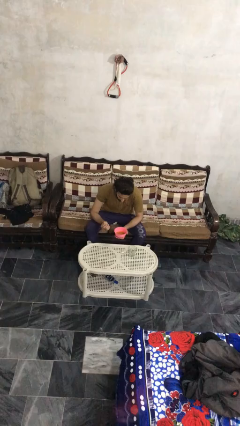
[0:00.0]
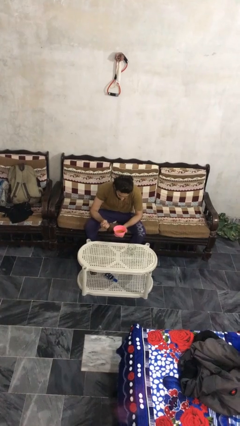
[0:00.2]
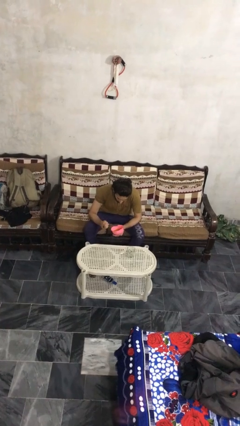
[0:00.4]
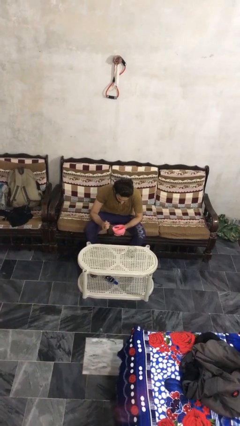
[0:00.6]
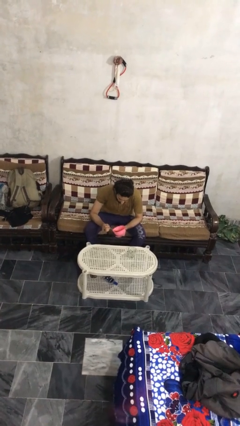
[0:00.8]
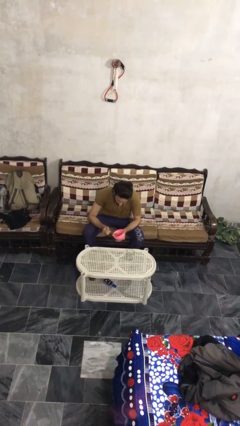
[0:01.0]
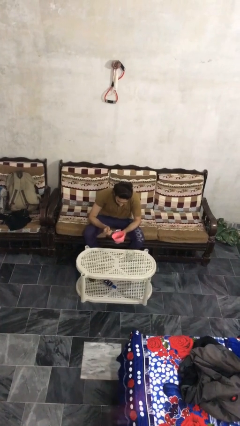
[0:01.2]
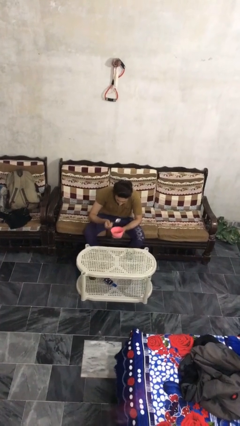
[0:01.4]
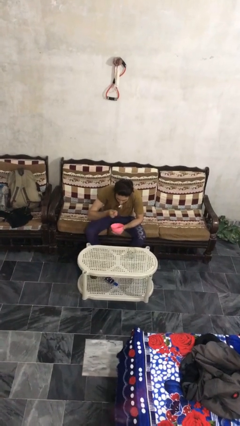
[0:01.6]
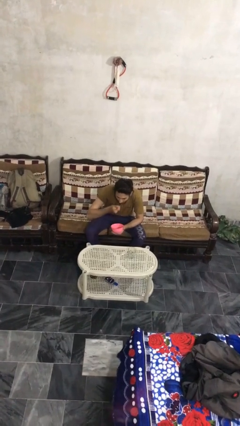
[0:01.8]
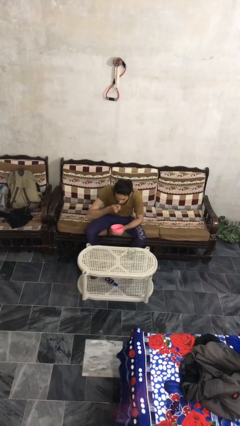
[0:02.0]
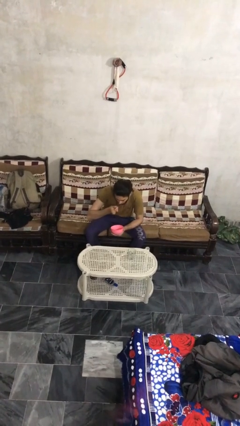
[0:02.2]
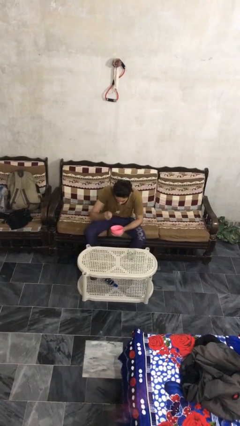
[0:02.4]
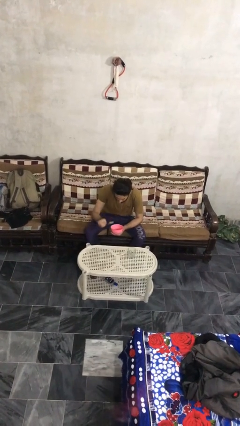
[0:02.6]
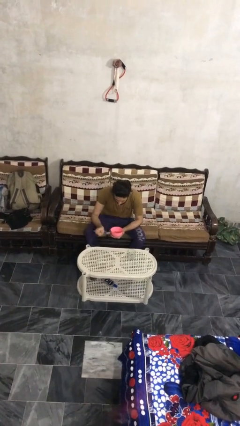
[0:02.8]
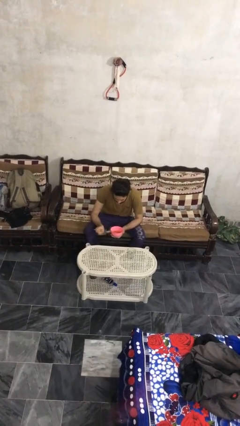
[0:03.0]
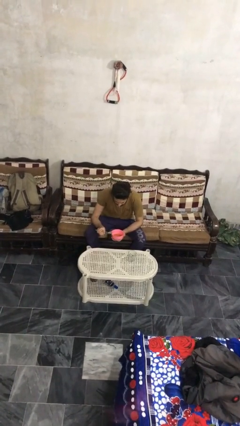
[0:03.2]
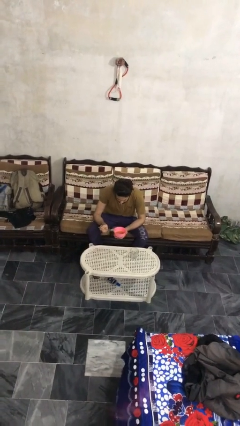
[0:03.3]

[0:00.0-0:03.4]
person eats with utensil

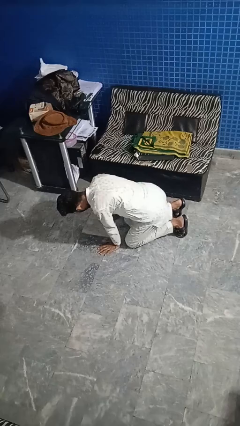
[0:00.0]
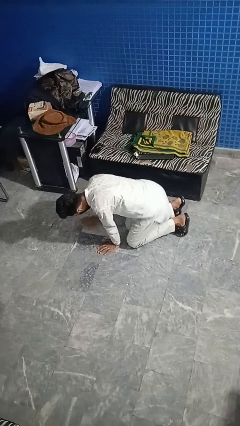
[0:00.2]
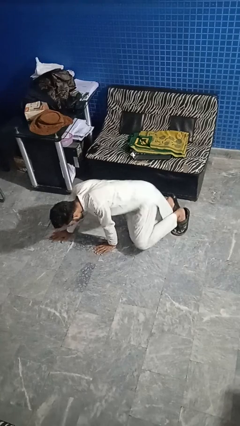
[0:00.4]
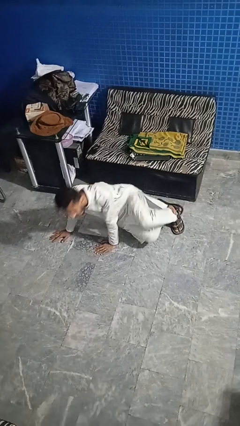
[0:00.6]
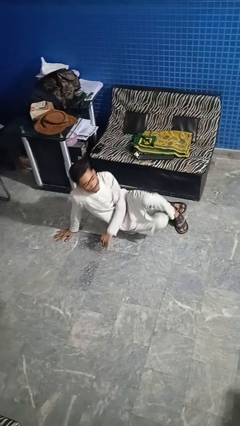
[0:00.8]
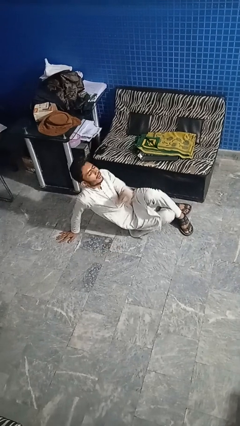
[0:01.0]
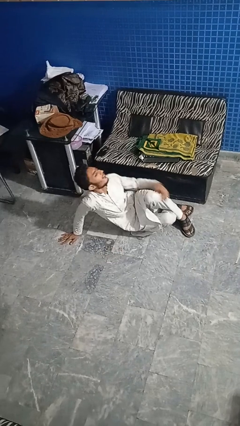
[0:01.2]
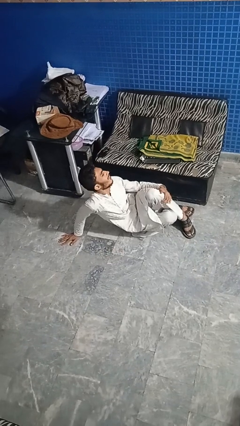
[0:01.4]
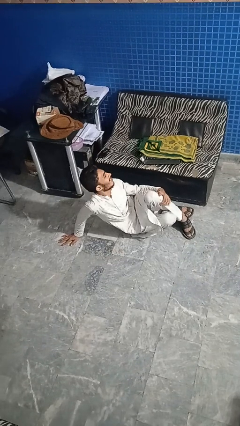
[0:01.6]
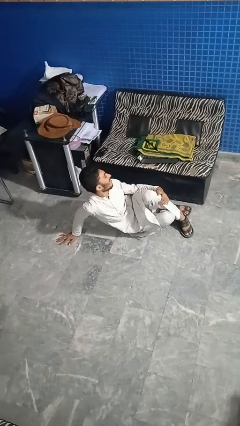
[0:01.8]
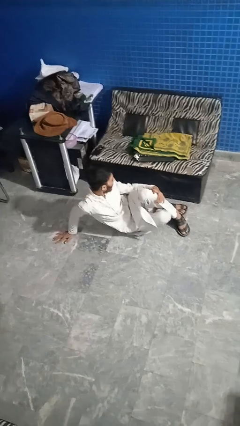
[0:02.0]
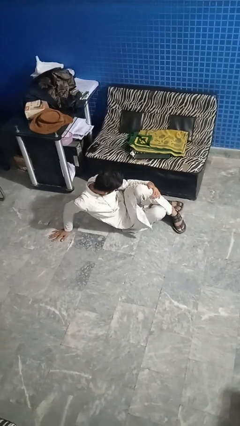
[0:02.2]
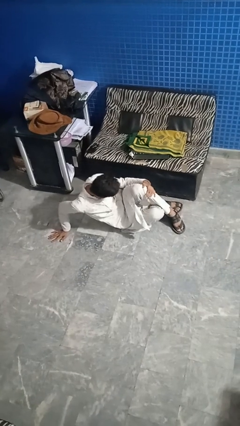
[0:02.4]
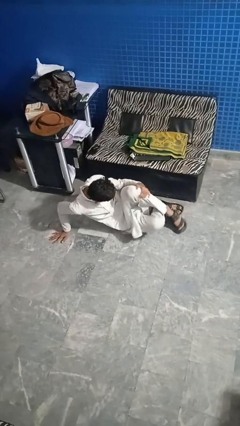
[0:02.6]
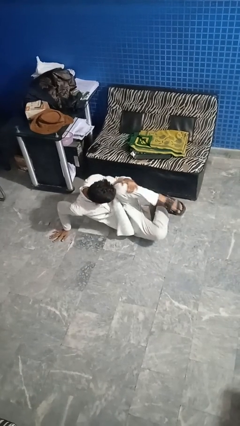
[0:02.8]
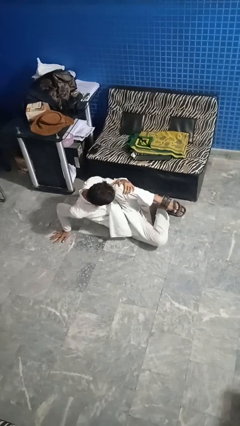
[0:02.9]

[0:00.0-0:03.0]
person lies down on floor

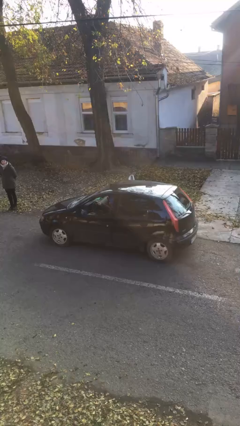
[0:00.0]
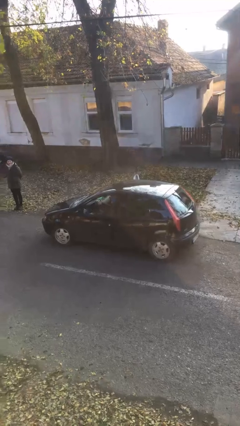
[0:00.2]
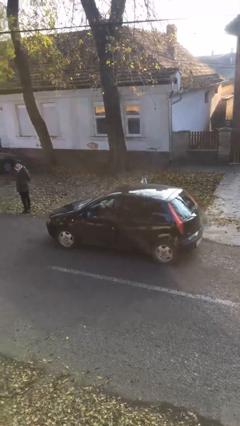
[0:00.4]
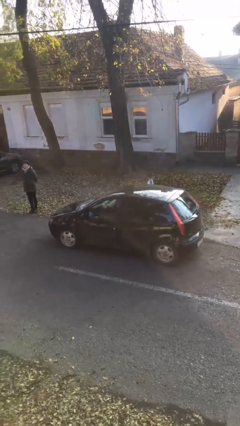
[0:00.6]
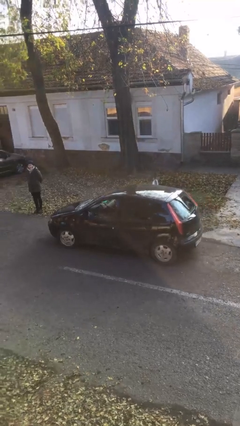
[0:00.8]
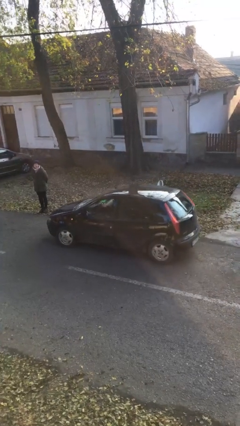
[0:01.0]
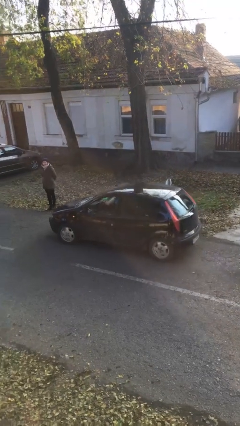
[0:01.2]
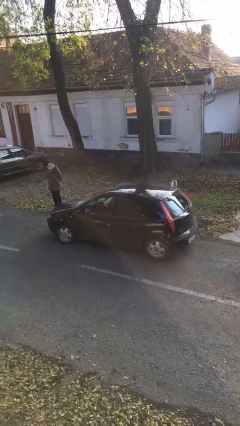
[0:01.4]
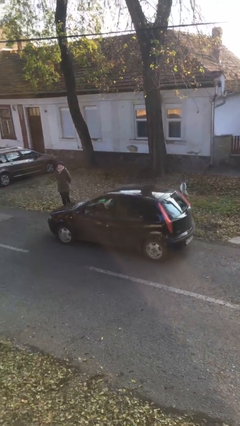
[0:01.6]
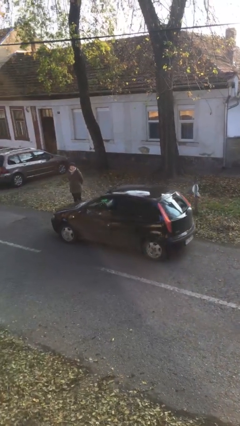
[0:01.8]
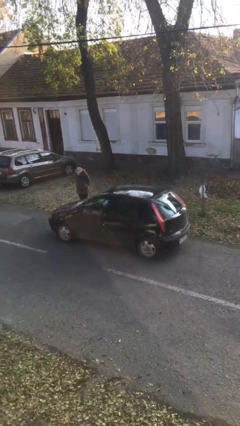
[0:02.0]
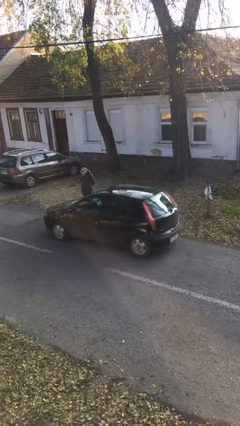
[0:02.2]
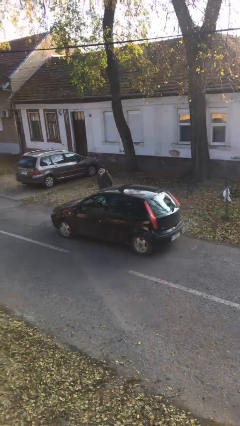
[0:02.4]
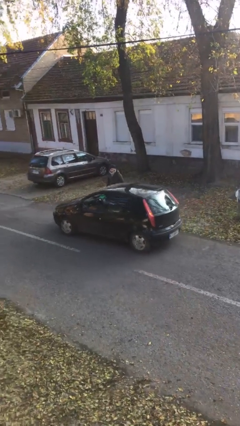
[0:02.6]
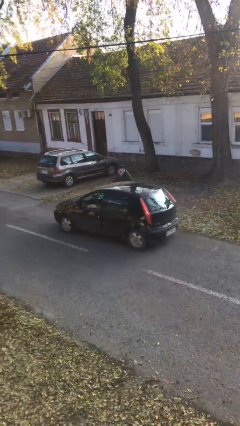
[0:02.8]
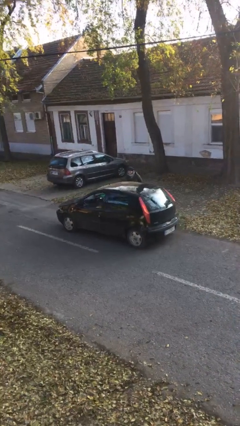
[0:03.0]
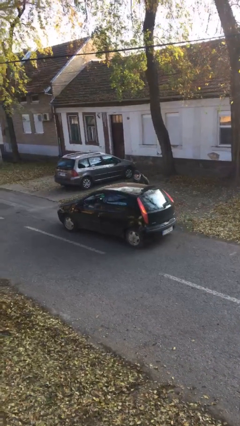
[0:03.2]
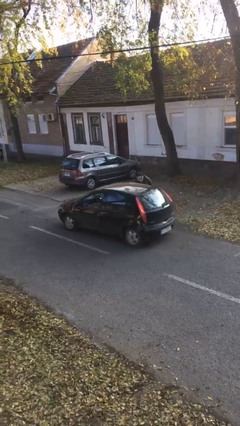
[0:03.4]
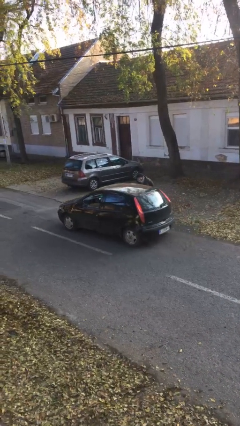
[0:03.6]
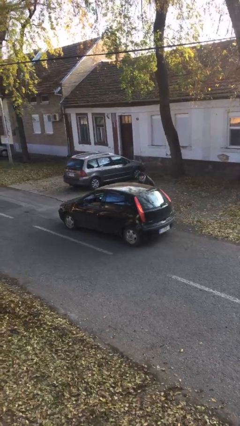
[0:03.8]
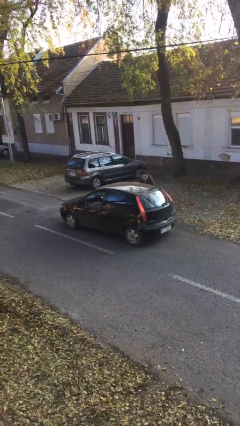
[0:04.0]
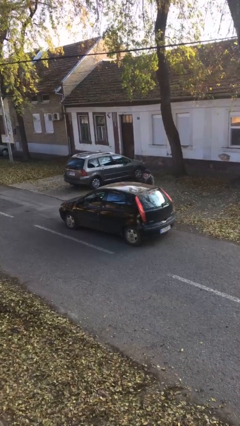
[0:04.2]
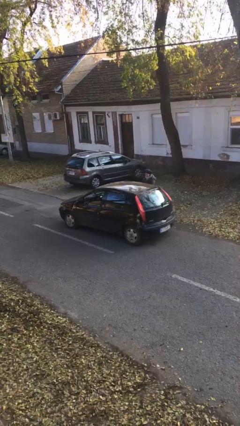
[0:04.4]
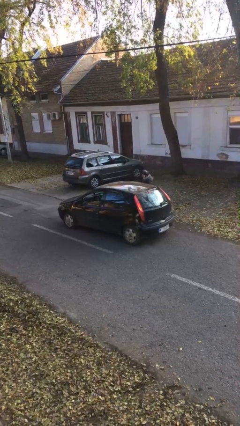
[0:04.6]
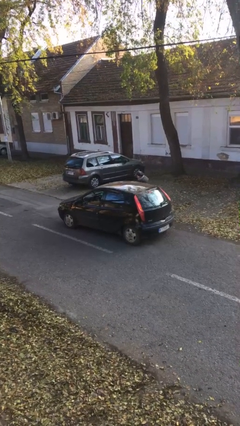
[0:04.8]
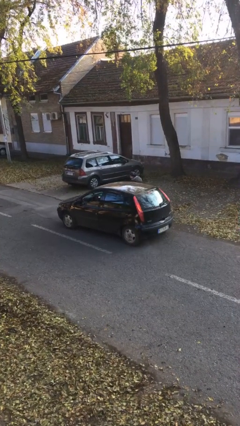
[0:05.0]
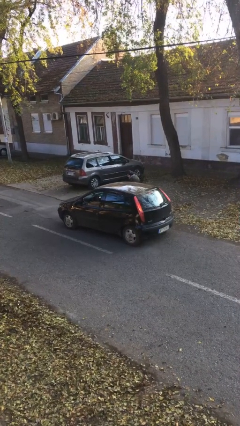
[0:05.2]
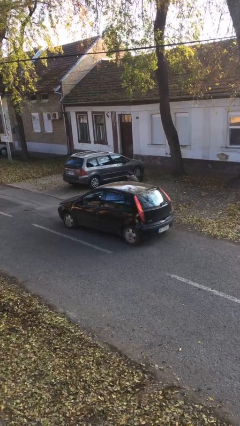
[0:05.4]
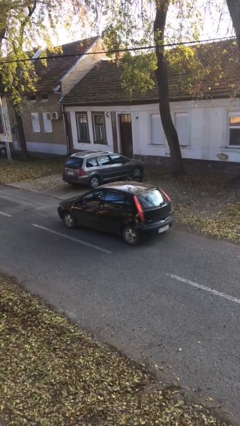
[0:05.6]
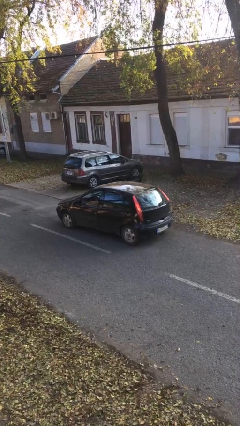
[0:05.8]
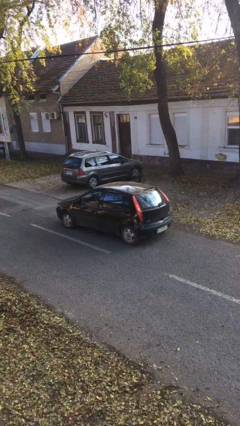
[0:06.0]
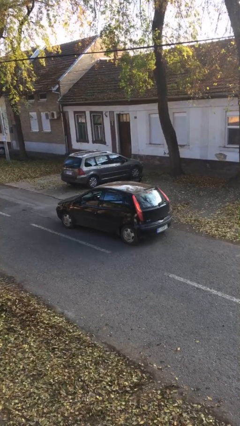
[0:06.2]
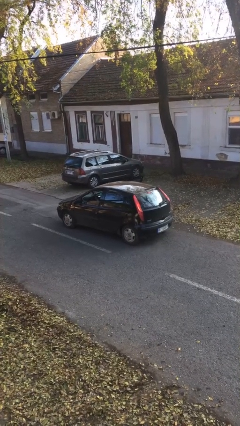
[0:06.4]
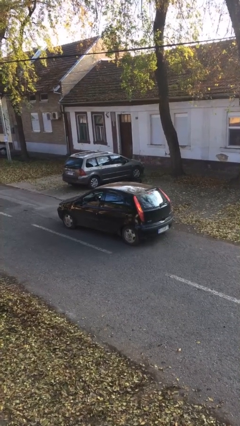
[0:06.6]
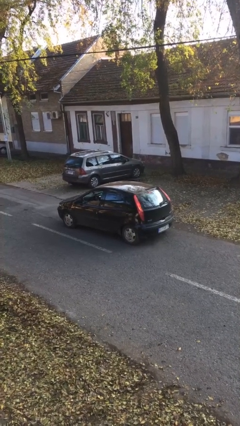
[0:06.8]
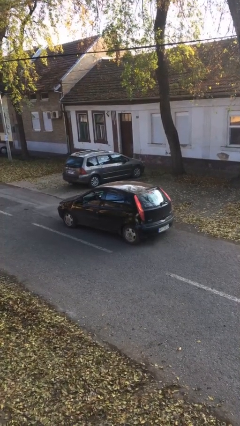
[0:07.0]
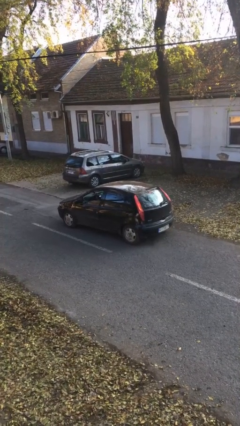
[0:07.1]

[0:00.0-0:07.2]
car picks up person

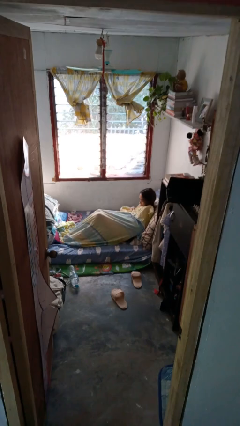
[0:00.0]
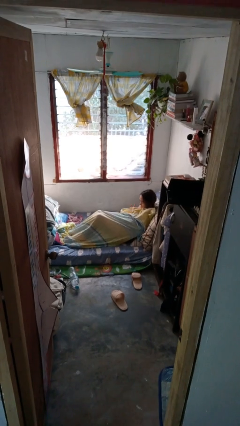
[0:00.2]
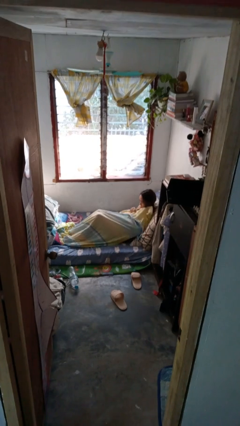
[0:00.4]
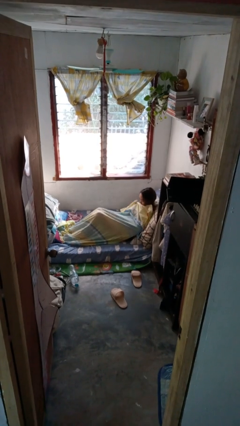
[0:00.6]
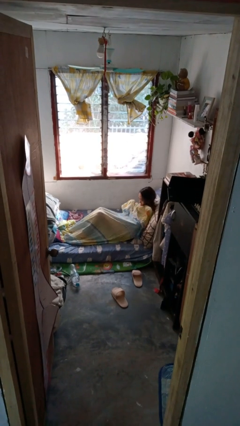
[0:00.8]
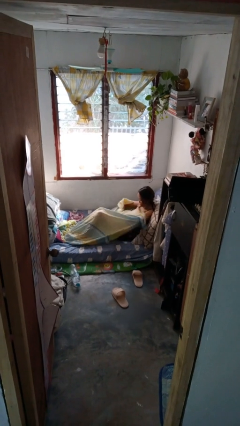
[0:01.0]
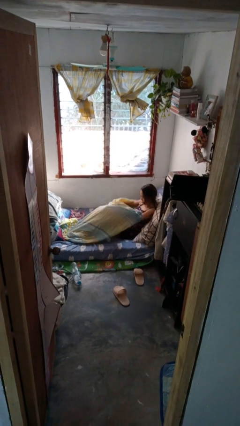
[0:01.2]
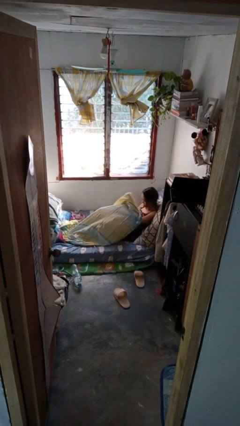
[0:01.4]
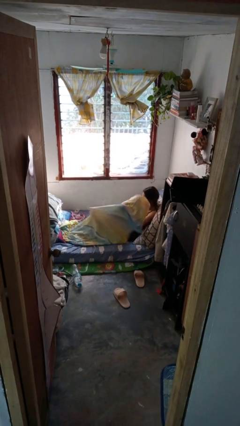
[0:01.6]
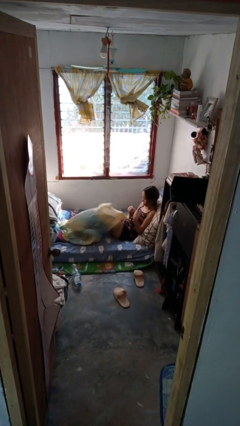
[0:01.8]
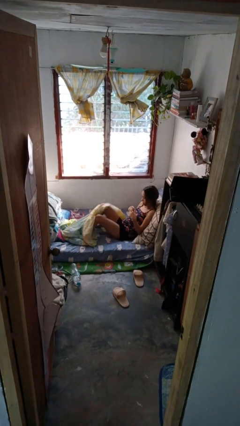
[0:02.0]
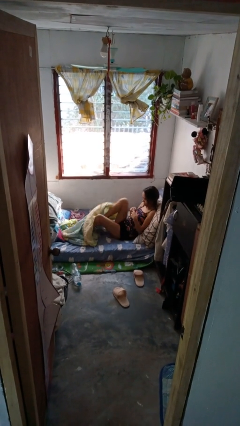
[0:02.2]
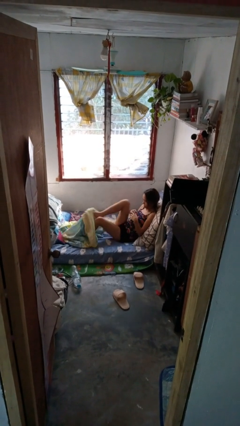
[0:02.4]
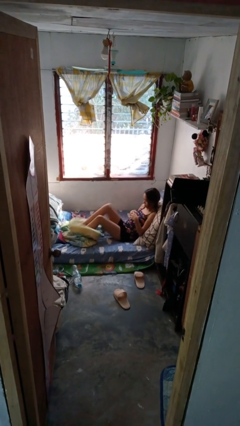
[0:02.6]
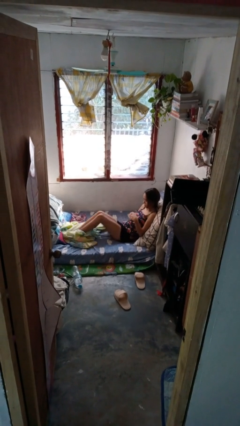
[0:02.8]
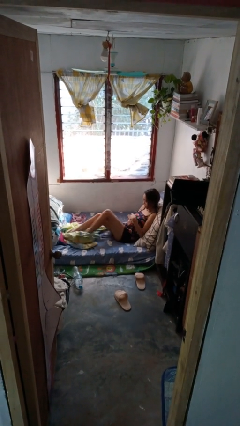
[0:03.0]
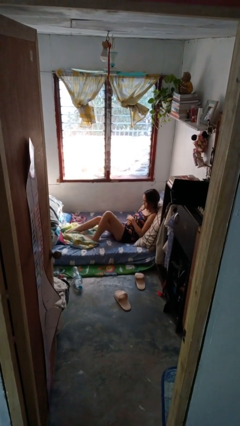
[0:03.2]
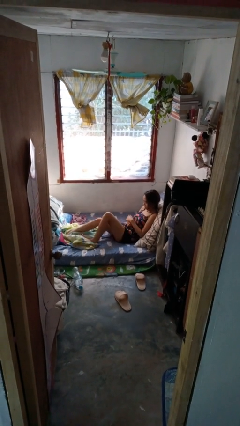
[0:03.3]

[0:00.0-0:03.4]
person uncovers with bedsheets

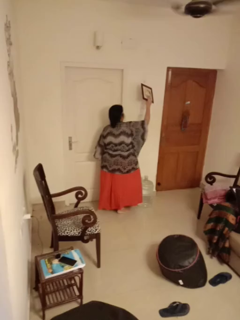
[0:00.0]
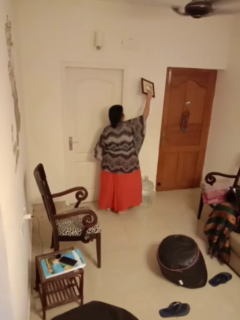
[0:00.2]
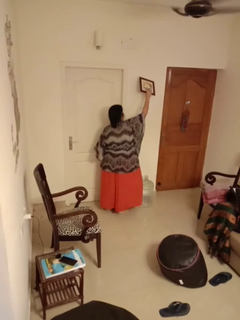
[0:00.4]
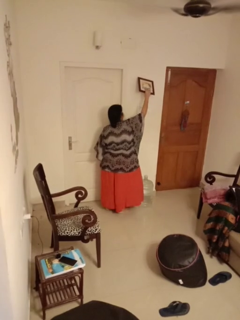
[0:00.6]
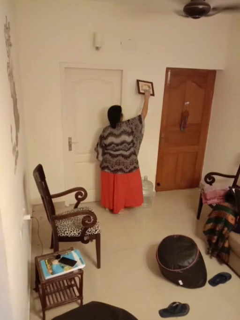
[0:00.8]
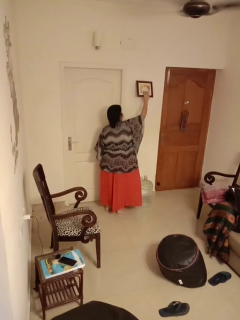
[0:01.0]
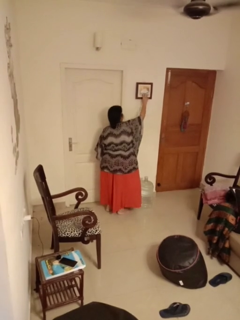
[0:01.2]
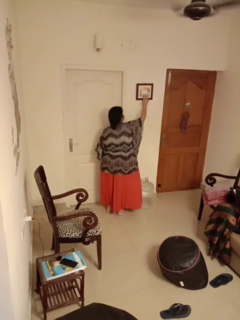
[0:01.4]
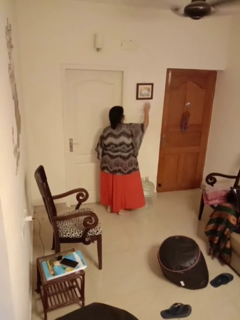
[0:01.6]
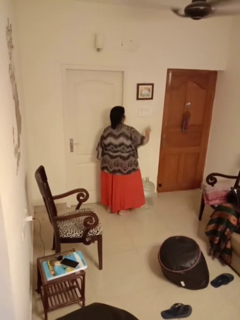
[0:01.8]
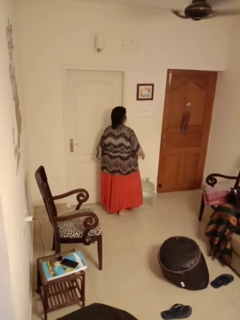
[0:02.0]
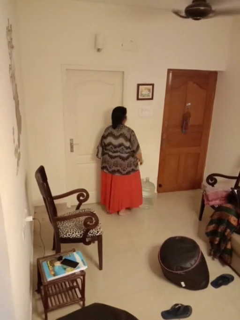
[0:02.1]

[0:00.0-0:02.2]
person puts up picture frame
